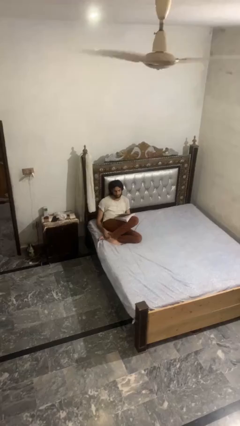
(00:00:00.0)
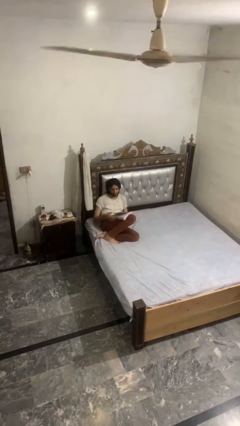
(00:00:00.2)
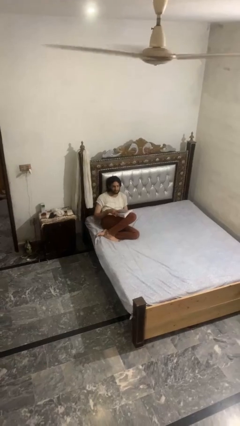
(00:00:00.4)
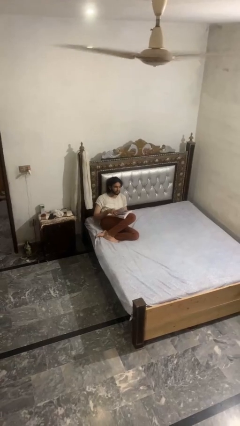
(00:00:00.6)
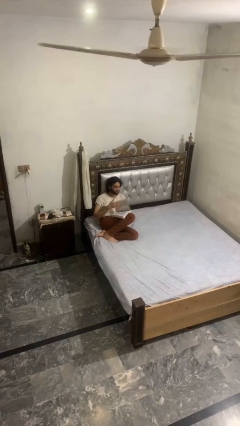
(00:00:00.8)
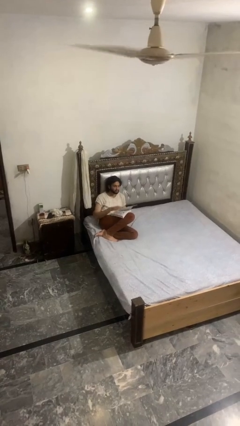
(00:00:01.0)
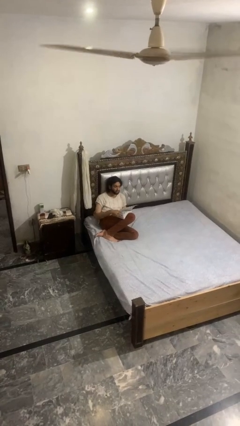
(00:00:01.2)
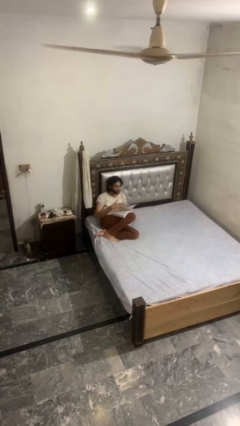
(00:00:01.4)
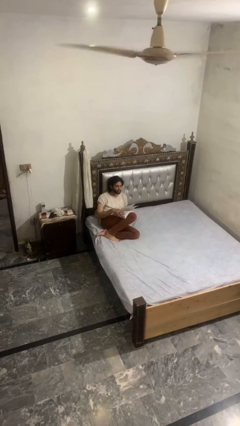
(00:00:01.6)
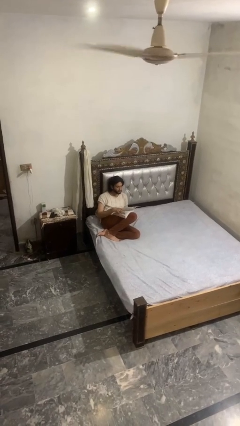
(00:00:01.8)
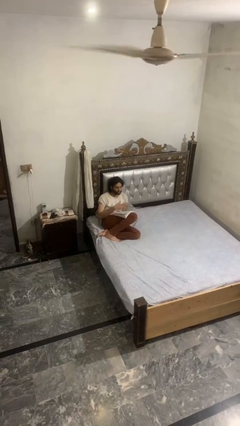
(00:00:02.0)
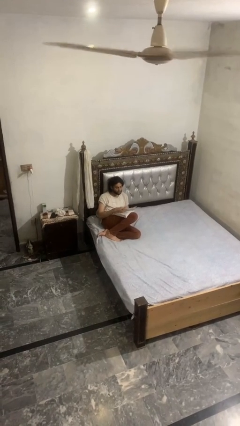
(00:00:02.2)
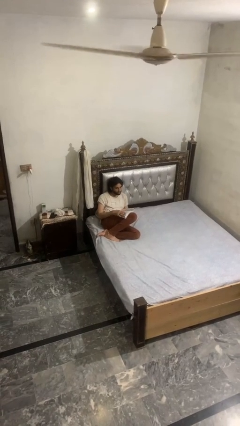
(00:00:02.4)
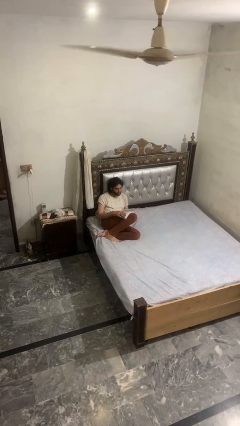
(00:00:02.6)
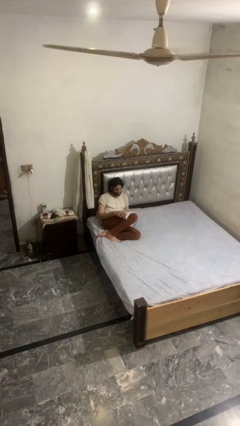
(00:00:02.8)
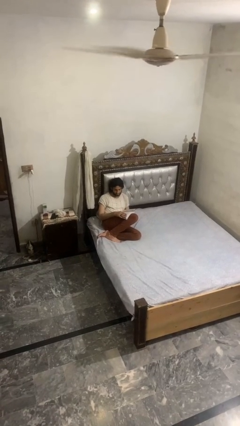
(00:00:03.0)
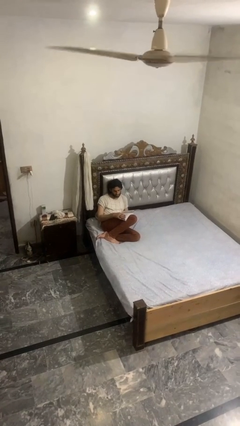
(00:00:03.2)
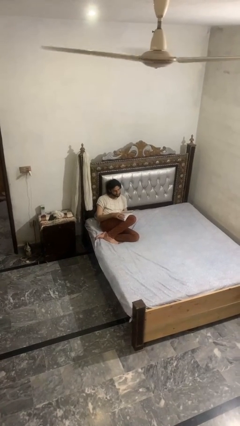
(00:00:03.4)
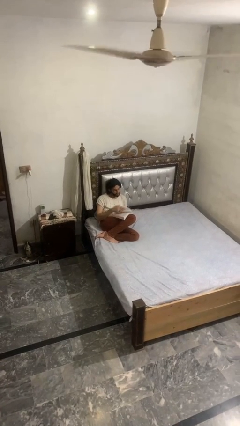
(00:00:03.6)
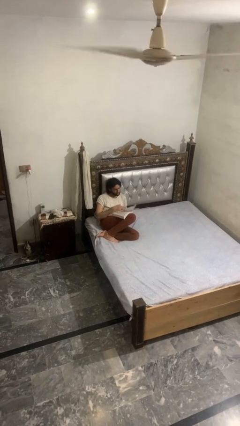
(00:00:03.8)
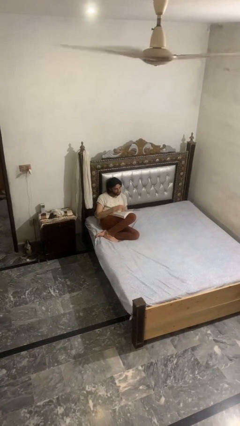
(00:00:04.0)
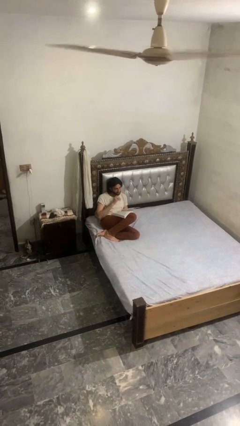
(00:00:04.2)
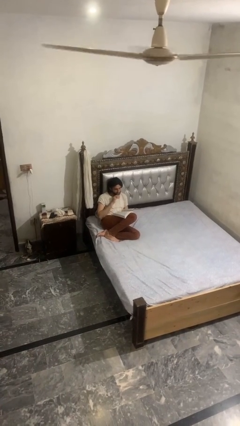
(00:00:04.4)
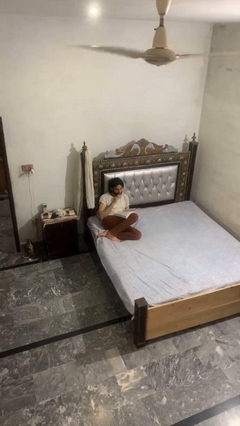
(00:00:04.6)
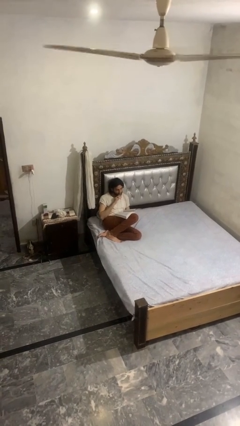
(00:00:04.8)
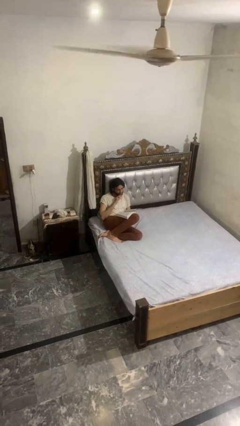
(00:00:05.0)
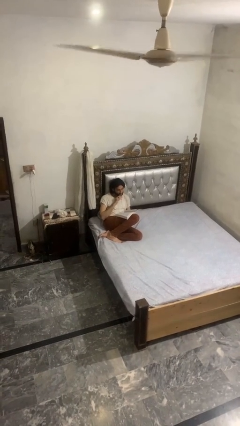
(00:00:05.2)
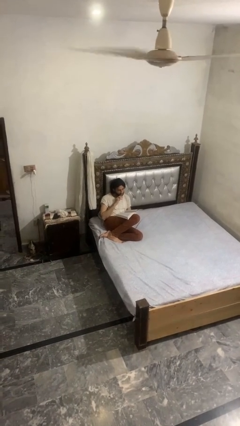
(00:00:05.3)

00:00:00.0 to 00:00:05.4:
person reads book

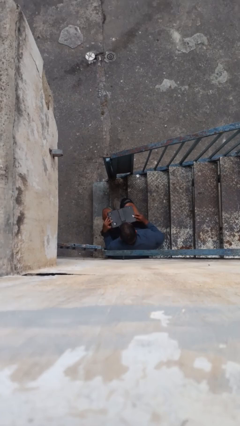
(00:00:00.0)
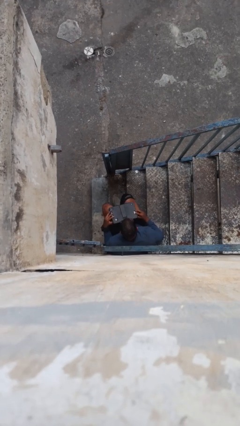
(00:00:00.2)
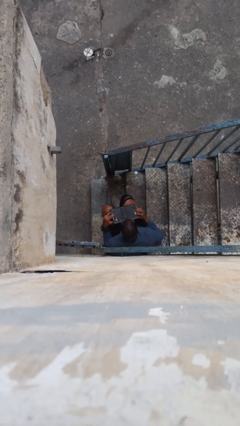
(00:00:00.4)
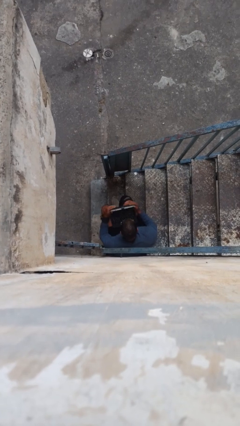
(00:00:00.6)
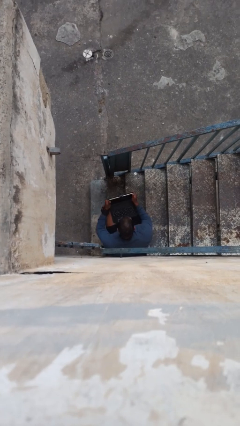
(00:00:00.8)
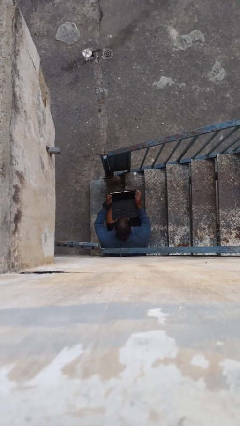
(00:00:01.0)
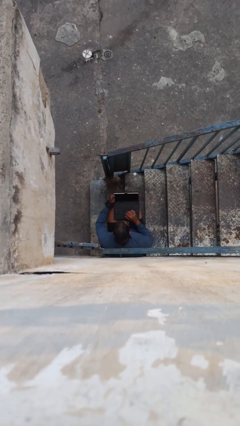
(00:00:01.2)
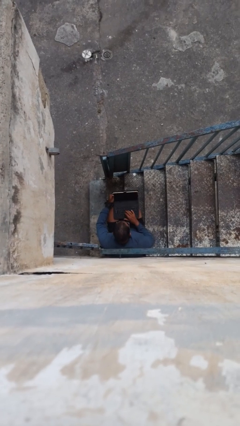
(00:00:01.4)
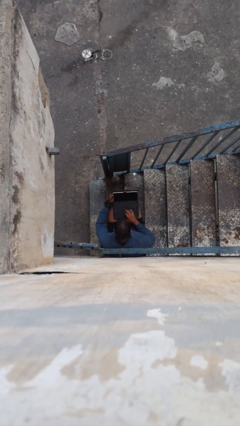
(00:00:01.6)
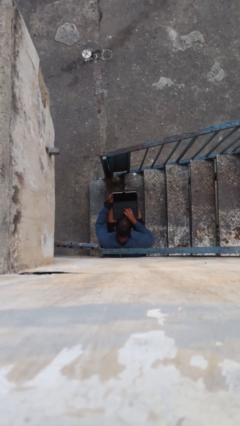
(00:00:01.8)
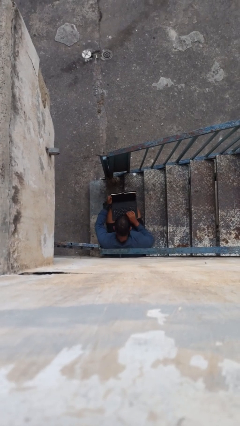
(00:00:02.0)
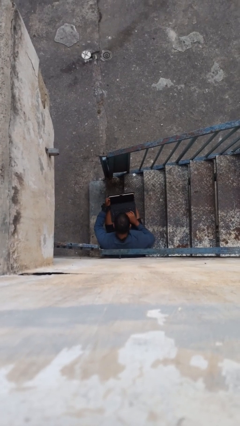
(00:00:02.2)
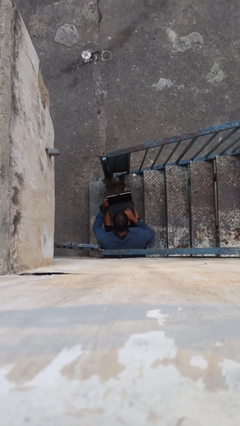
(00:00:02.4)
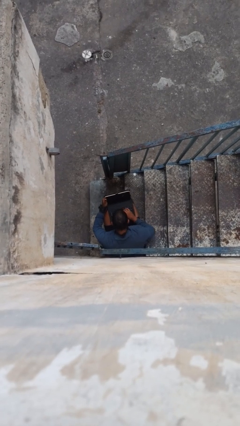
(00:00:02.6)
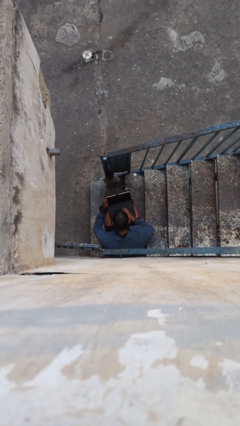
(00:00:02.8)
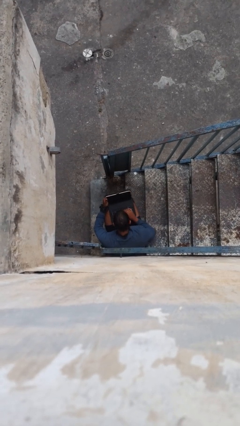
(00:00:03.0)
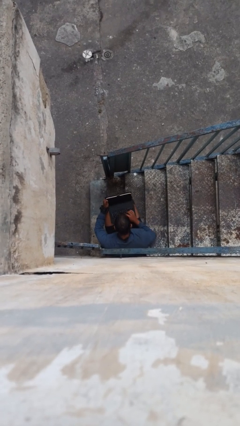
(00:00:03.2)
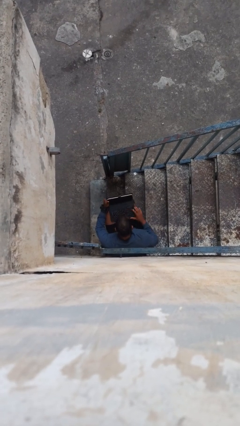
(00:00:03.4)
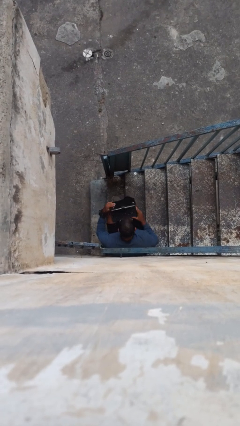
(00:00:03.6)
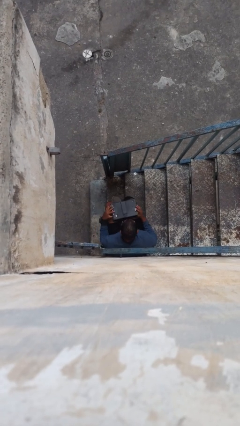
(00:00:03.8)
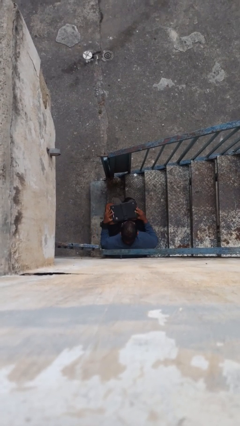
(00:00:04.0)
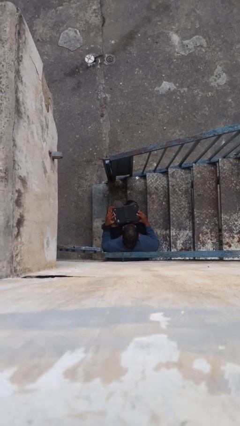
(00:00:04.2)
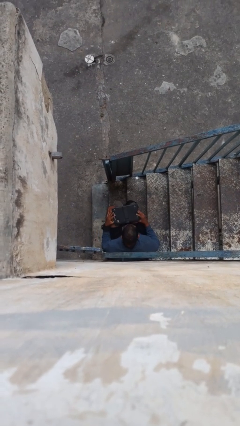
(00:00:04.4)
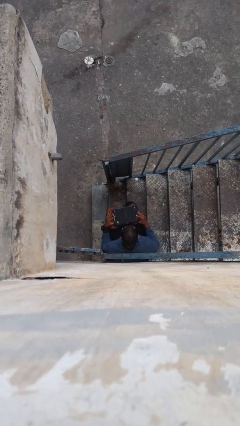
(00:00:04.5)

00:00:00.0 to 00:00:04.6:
person interacts with laptop

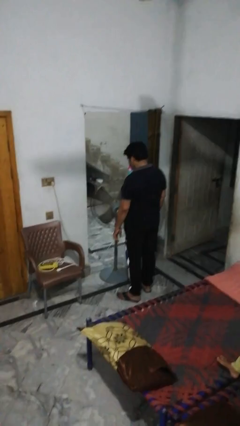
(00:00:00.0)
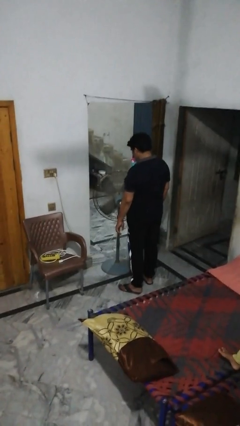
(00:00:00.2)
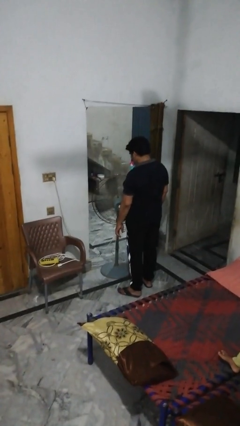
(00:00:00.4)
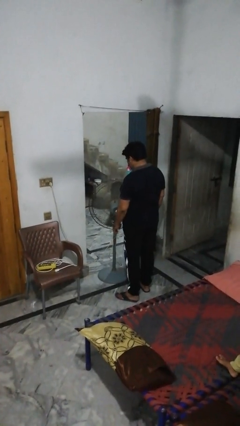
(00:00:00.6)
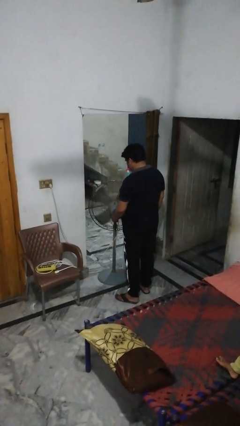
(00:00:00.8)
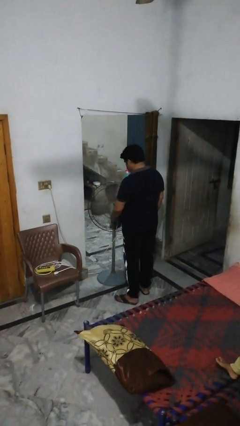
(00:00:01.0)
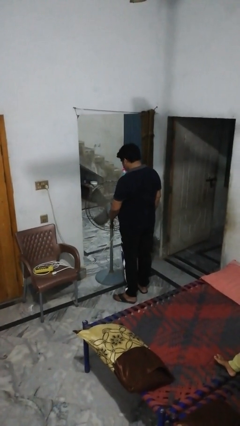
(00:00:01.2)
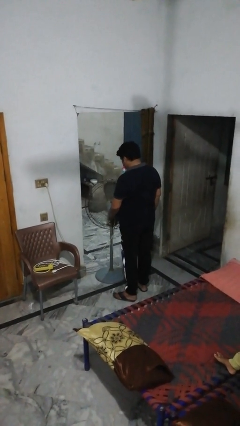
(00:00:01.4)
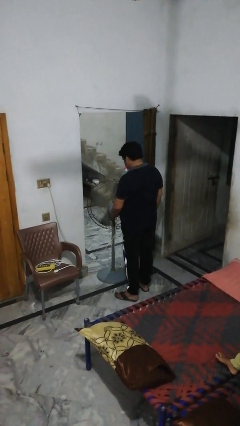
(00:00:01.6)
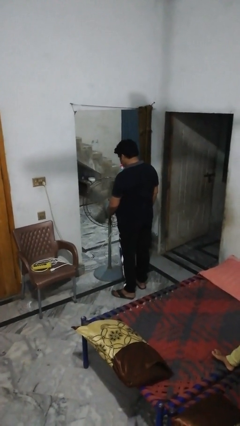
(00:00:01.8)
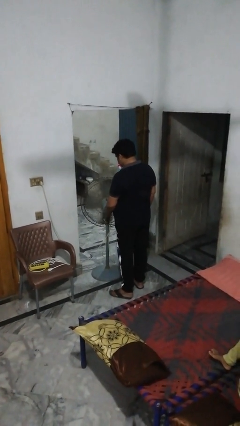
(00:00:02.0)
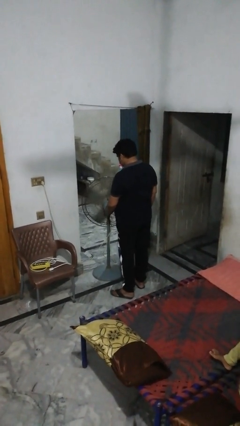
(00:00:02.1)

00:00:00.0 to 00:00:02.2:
person turns on fan

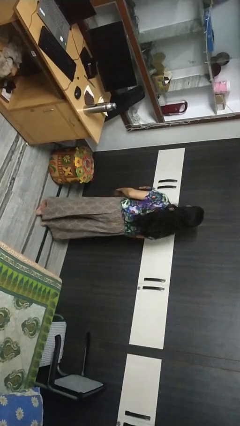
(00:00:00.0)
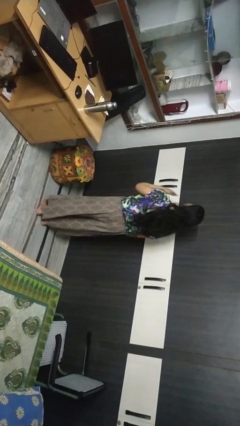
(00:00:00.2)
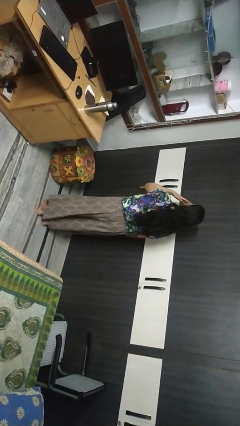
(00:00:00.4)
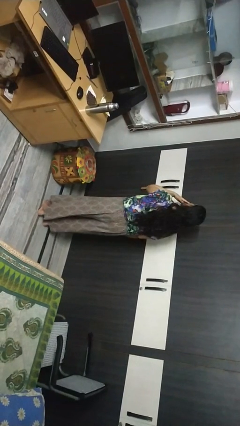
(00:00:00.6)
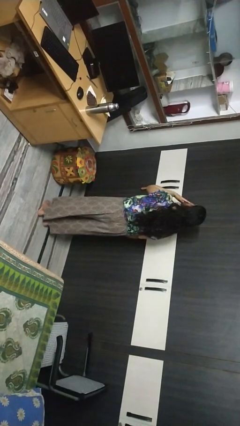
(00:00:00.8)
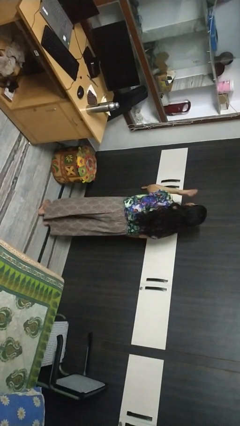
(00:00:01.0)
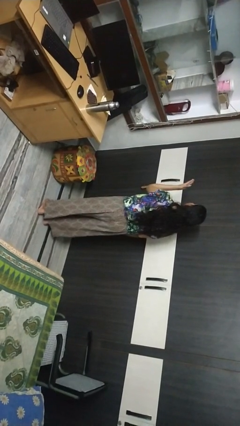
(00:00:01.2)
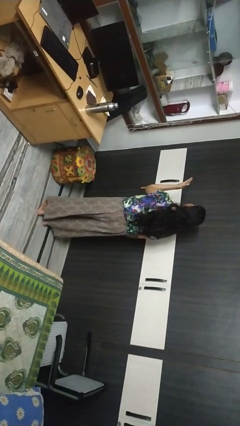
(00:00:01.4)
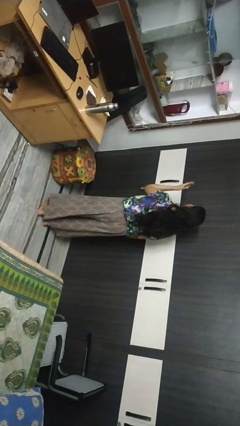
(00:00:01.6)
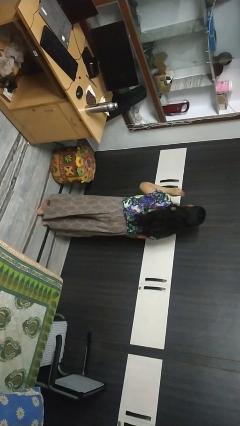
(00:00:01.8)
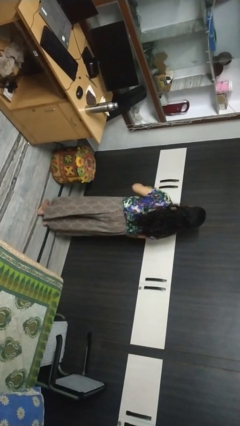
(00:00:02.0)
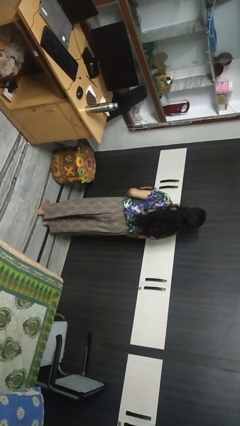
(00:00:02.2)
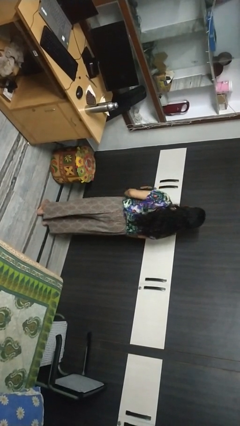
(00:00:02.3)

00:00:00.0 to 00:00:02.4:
person gestures blow kiss

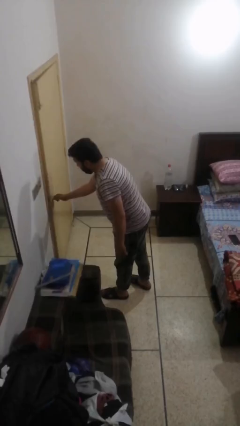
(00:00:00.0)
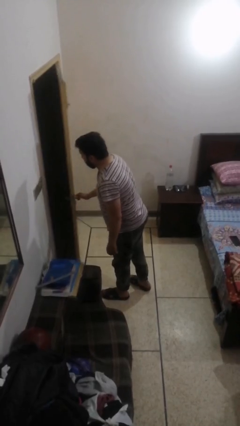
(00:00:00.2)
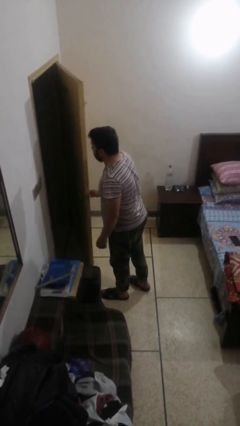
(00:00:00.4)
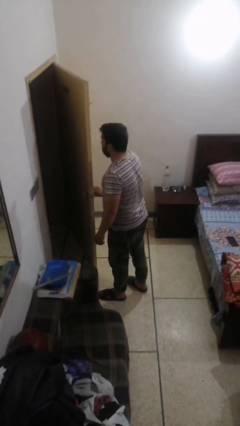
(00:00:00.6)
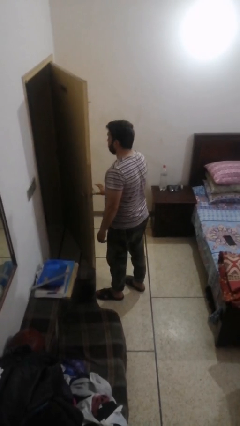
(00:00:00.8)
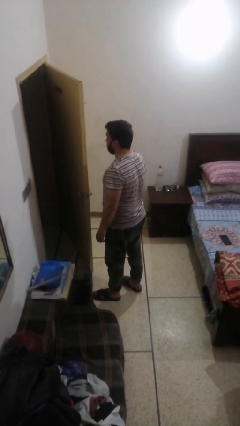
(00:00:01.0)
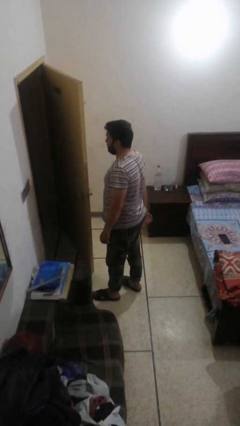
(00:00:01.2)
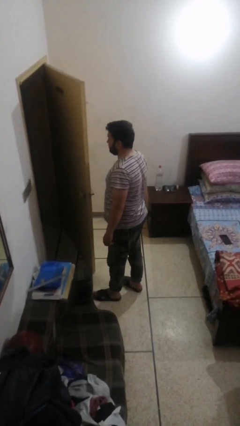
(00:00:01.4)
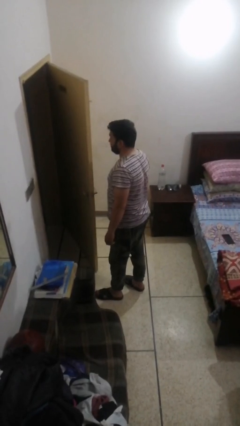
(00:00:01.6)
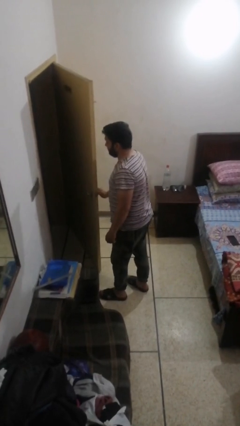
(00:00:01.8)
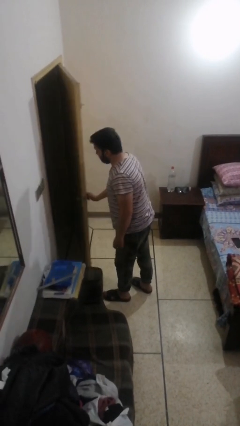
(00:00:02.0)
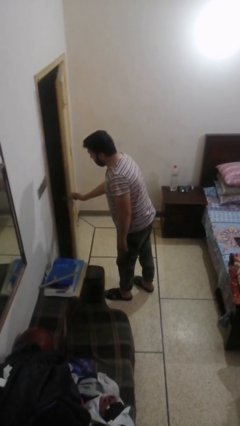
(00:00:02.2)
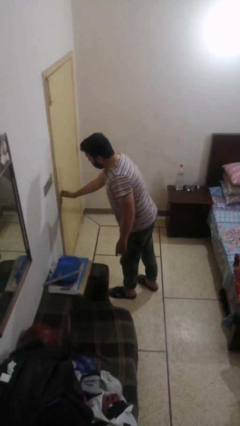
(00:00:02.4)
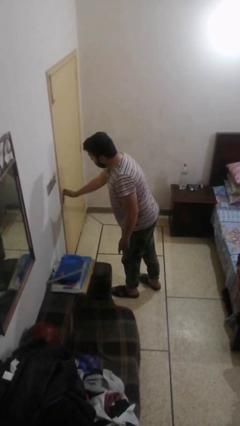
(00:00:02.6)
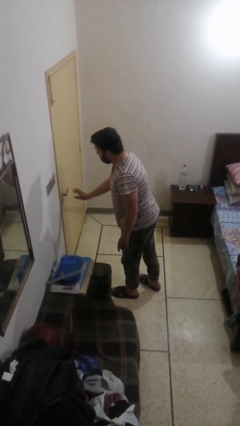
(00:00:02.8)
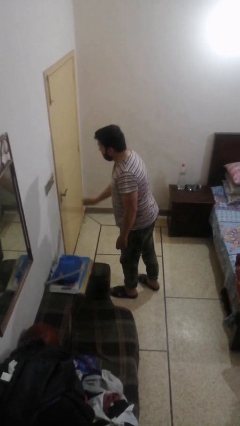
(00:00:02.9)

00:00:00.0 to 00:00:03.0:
person opens facility door
